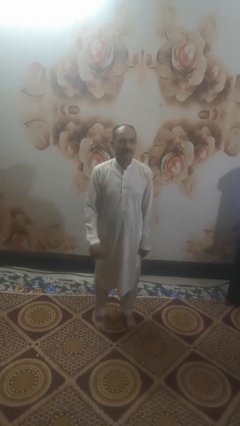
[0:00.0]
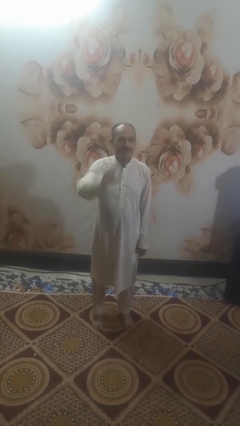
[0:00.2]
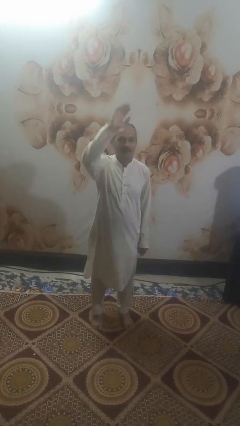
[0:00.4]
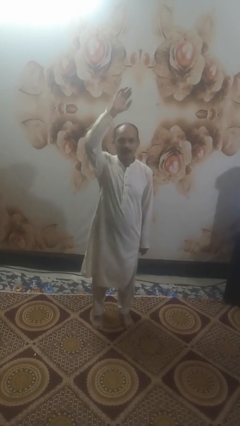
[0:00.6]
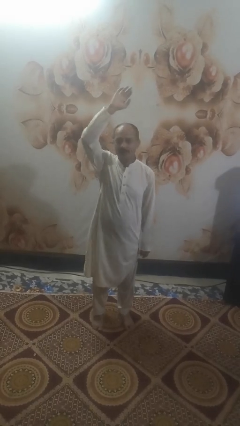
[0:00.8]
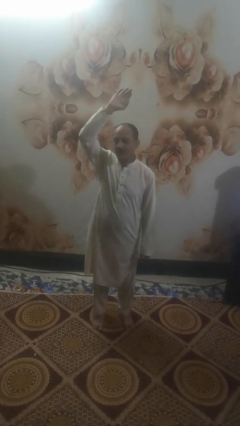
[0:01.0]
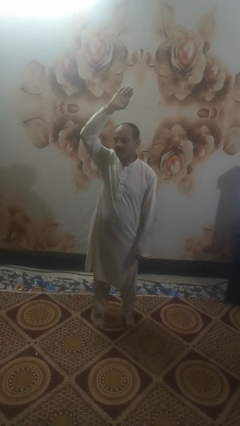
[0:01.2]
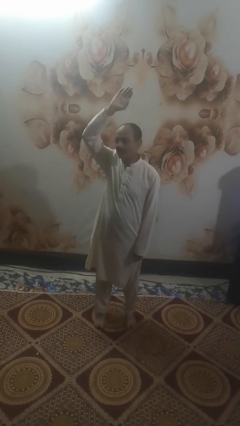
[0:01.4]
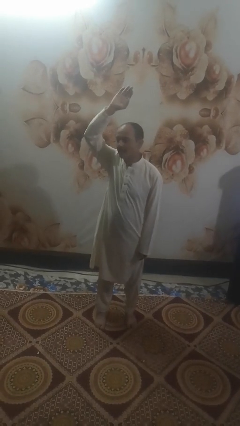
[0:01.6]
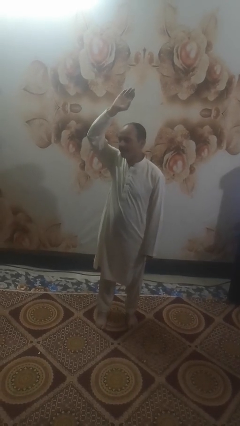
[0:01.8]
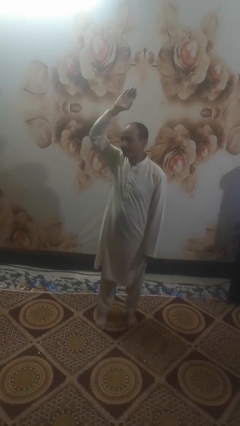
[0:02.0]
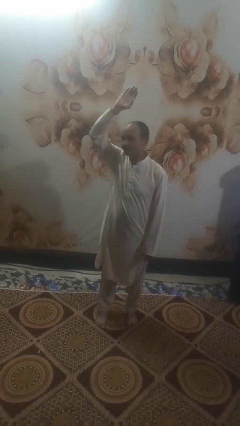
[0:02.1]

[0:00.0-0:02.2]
person gestures raise hand

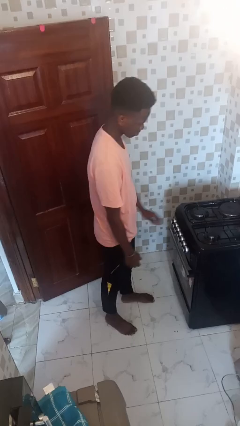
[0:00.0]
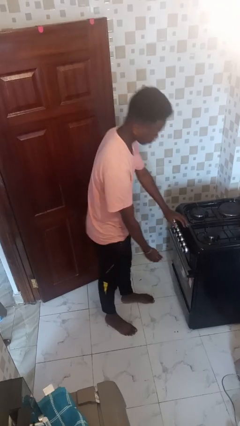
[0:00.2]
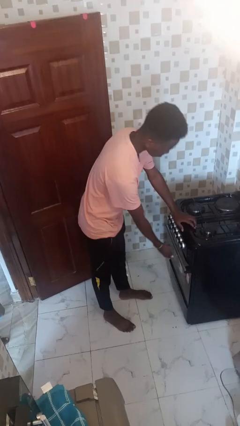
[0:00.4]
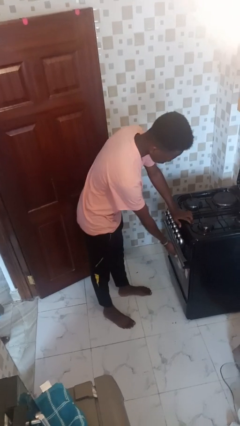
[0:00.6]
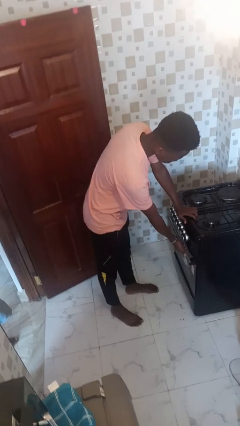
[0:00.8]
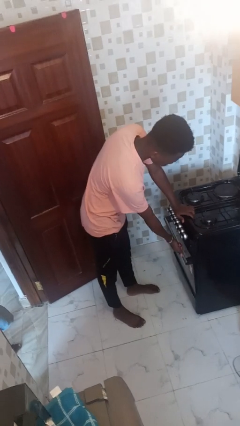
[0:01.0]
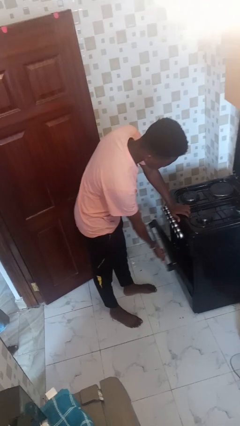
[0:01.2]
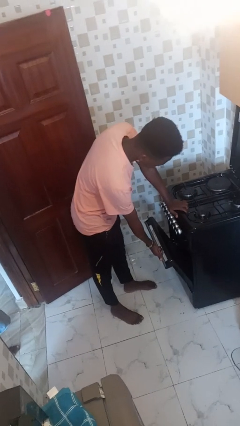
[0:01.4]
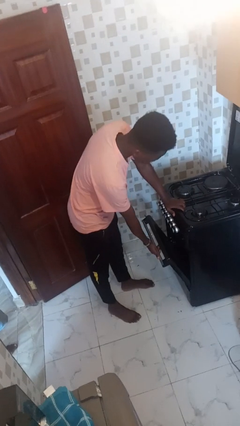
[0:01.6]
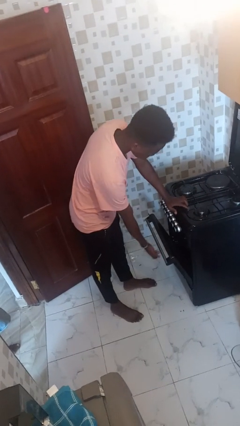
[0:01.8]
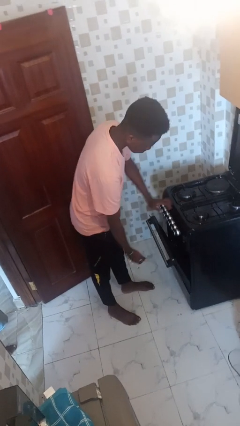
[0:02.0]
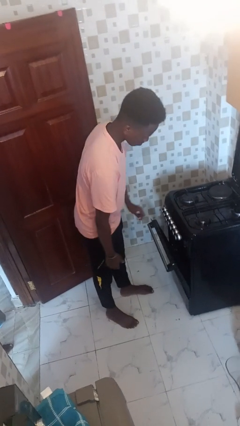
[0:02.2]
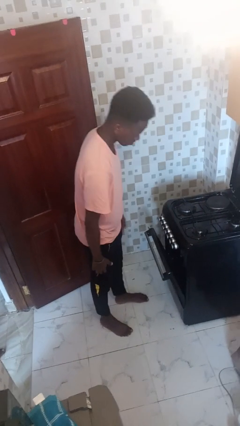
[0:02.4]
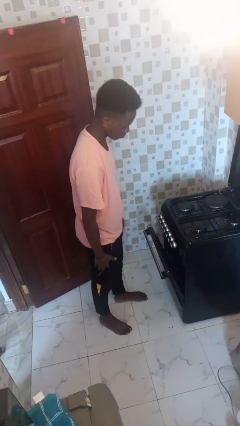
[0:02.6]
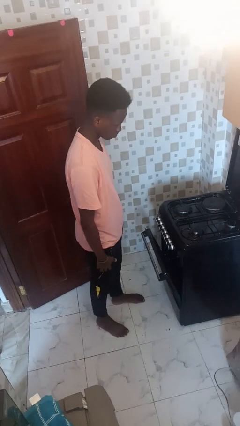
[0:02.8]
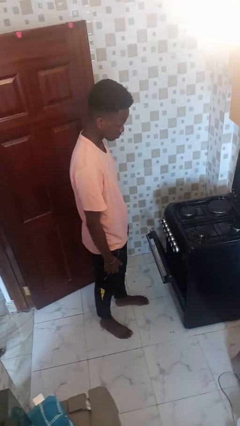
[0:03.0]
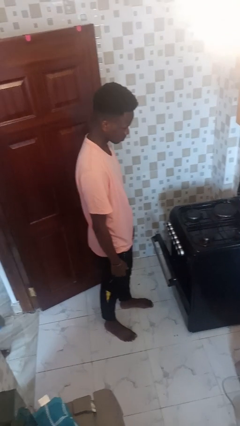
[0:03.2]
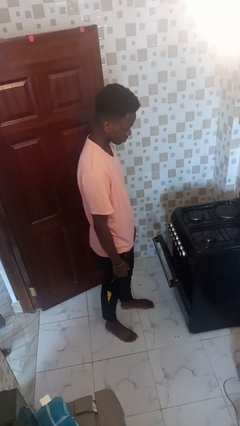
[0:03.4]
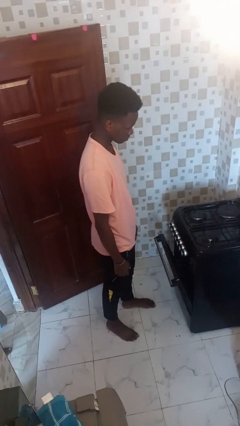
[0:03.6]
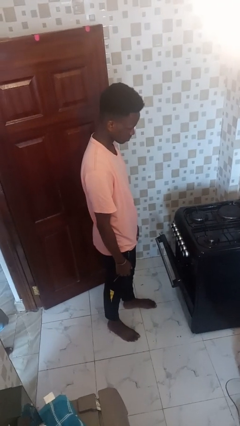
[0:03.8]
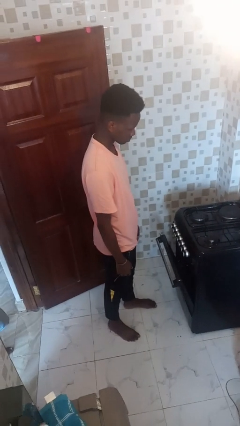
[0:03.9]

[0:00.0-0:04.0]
person opens oven door

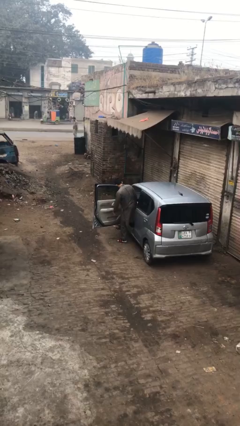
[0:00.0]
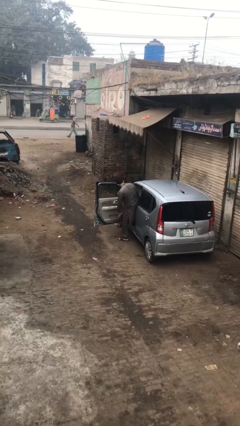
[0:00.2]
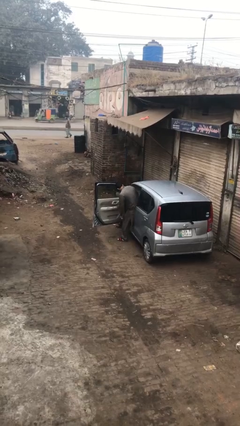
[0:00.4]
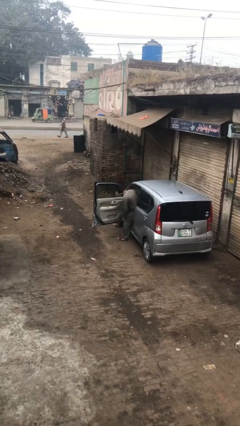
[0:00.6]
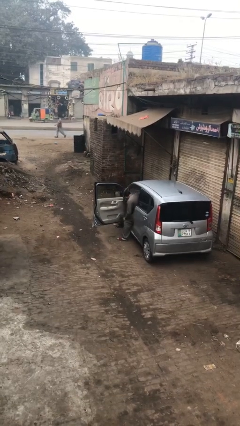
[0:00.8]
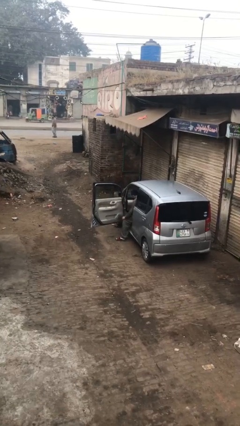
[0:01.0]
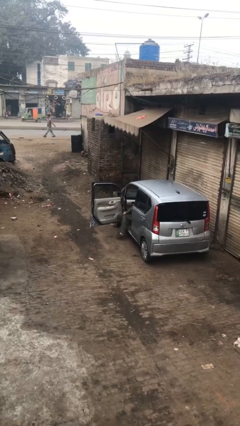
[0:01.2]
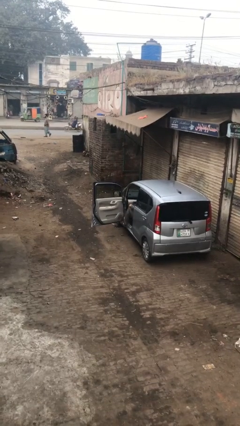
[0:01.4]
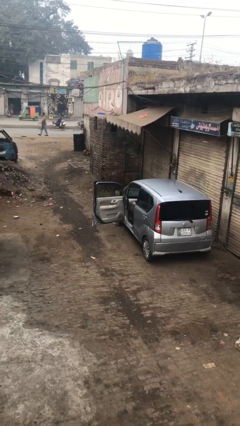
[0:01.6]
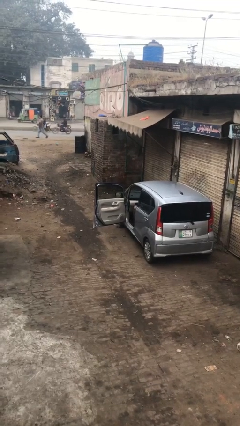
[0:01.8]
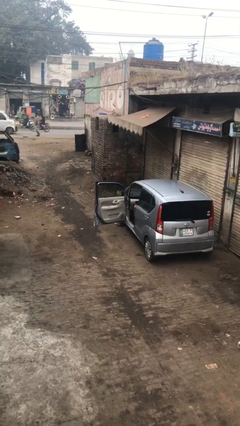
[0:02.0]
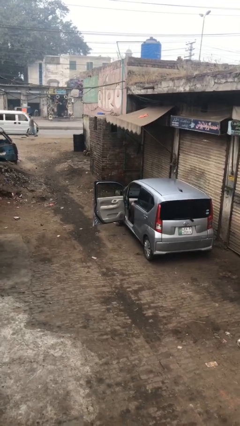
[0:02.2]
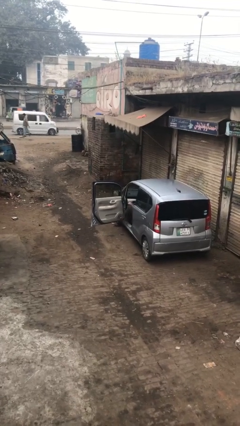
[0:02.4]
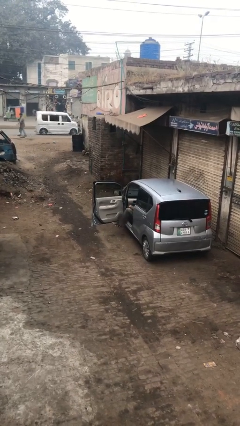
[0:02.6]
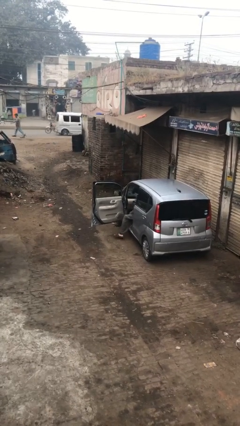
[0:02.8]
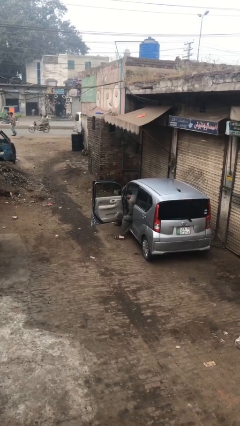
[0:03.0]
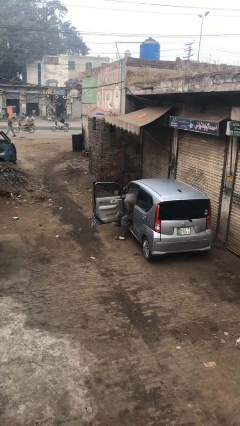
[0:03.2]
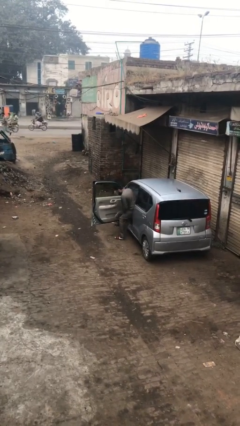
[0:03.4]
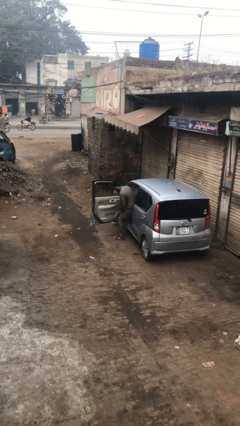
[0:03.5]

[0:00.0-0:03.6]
person enters car

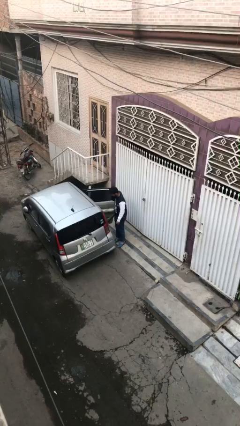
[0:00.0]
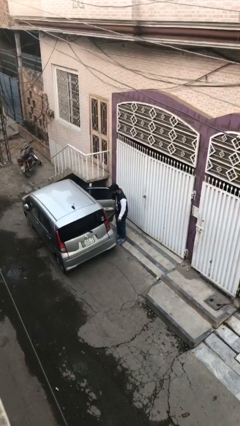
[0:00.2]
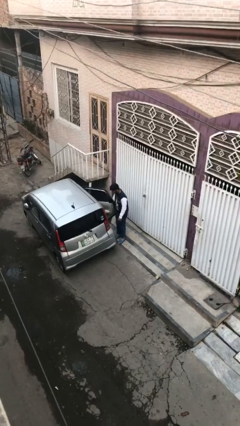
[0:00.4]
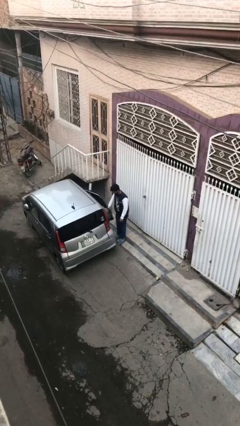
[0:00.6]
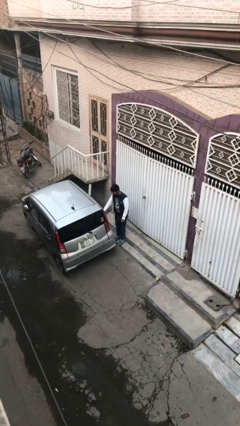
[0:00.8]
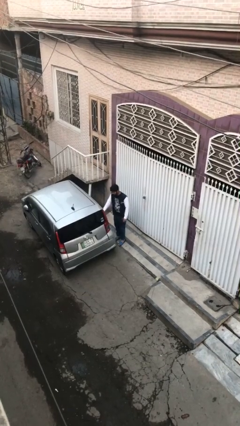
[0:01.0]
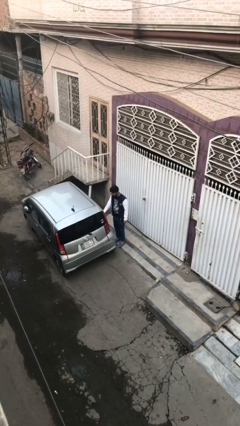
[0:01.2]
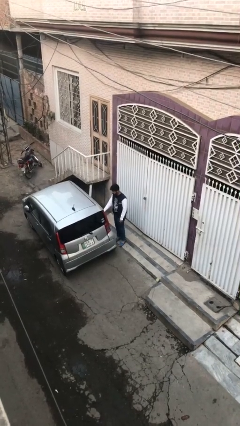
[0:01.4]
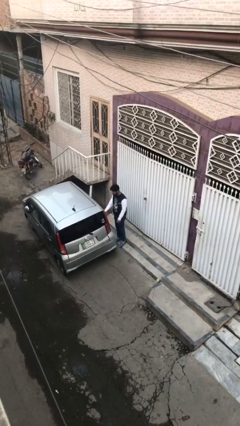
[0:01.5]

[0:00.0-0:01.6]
person closes car door

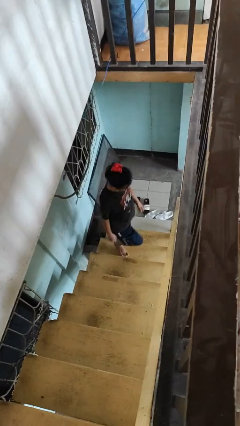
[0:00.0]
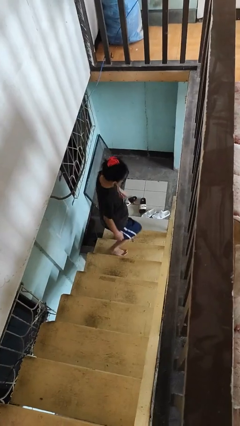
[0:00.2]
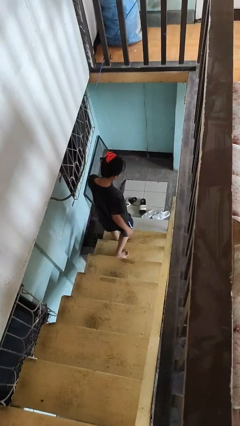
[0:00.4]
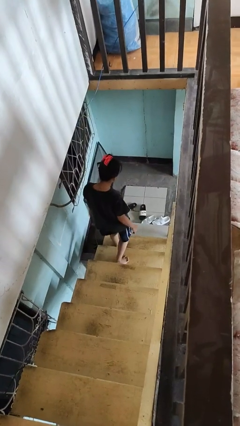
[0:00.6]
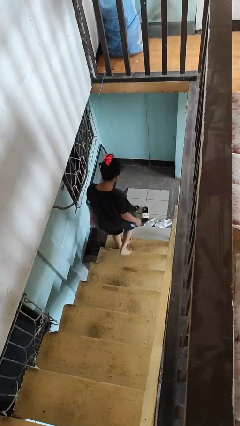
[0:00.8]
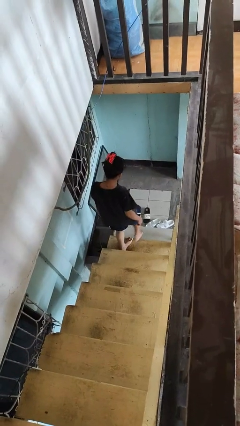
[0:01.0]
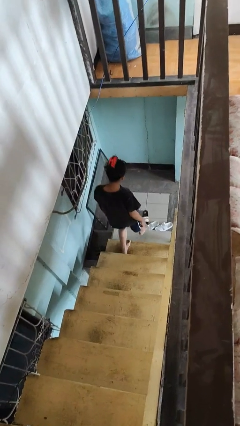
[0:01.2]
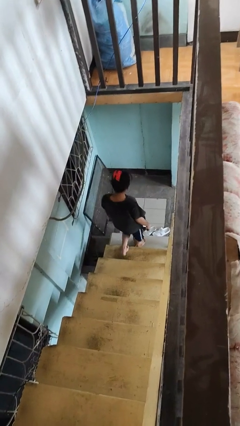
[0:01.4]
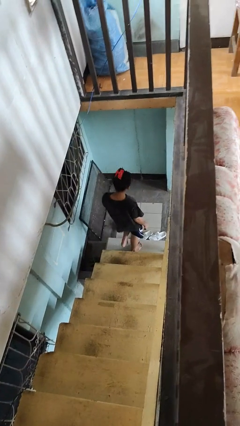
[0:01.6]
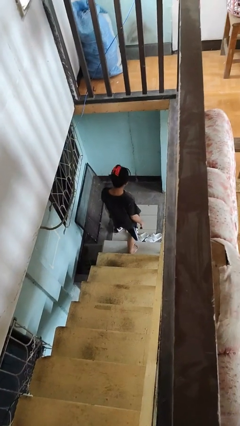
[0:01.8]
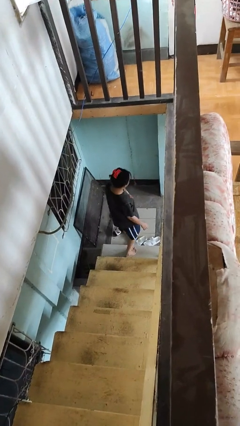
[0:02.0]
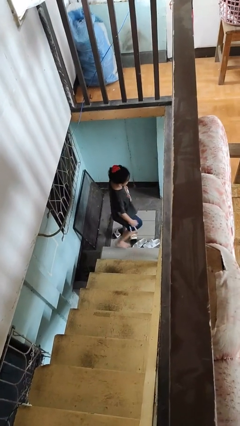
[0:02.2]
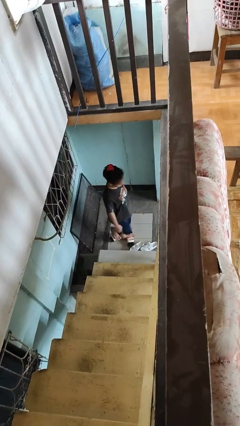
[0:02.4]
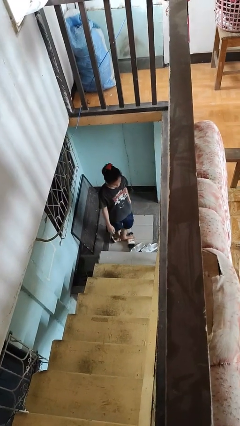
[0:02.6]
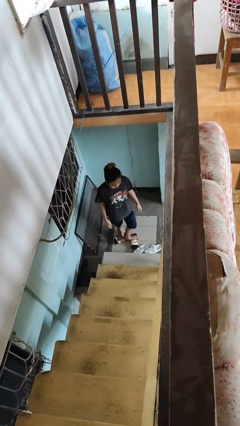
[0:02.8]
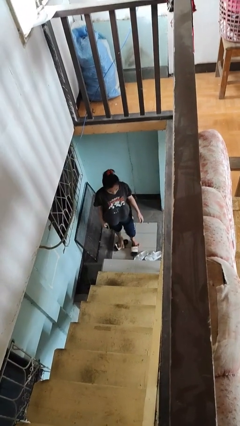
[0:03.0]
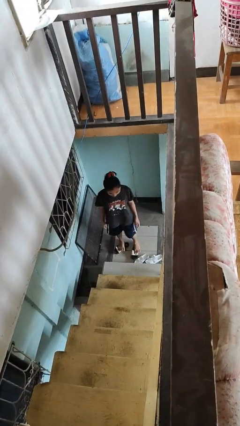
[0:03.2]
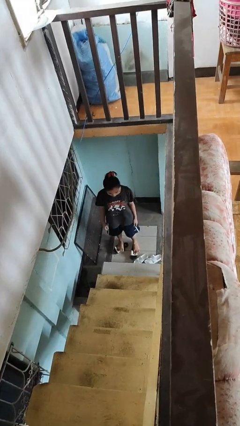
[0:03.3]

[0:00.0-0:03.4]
person climbs down stairs

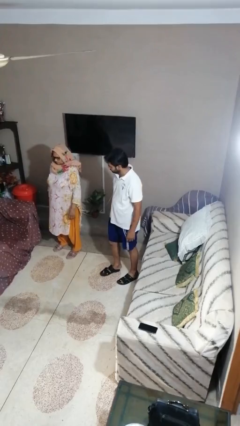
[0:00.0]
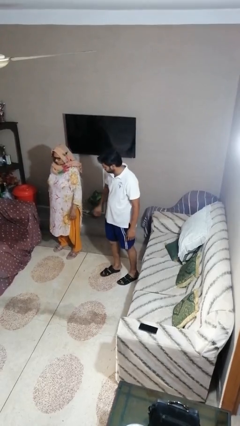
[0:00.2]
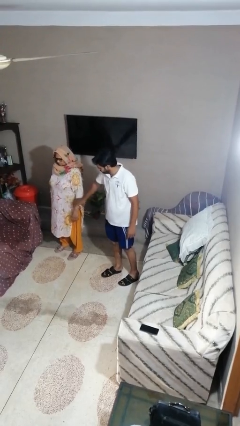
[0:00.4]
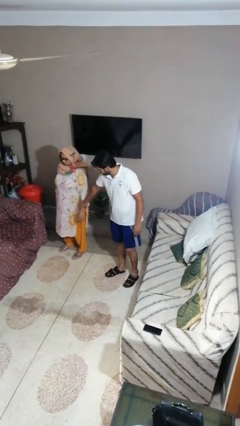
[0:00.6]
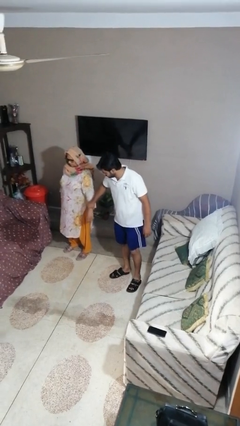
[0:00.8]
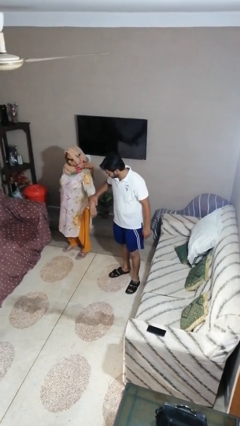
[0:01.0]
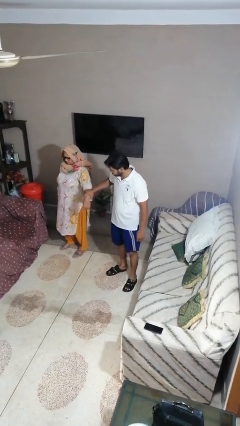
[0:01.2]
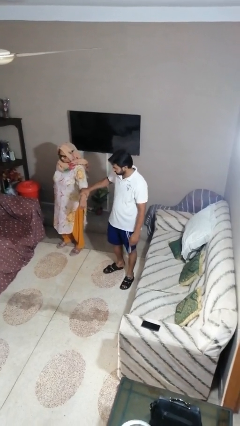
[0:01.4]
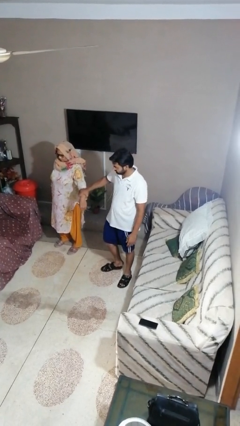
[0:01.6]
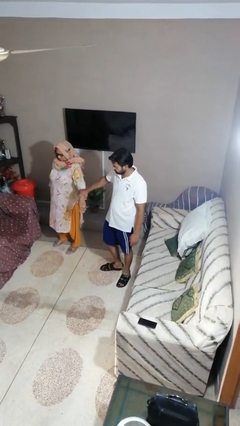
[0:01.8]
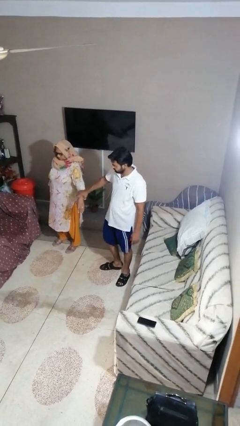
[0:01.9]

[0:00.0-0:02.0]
person grabs person by forearm

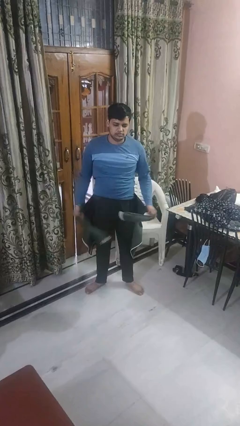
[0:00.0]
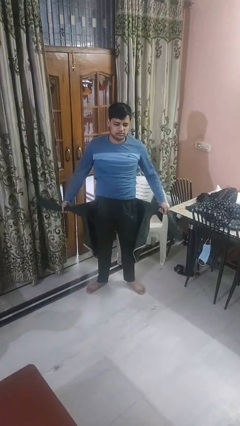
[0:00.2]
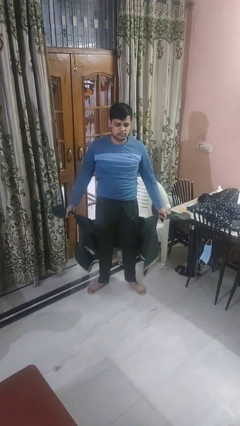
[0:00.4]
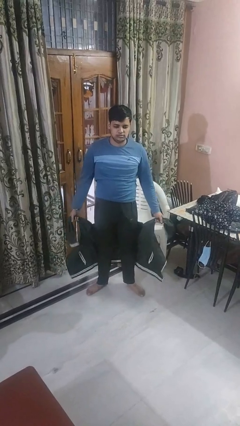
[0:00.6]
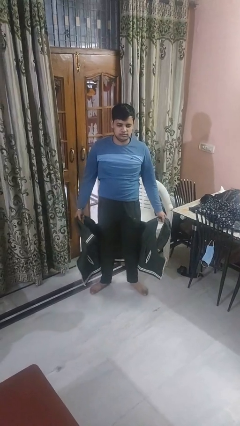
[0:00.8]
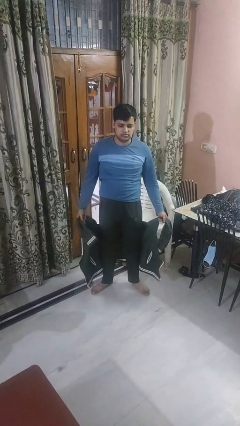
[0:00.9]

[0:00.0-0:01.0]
person unties jacket around waist
